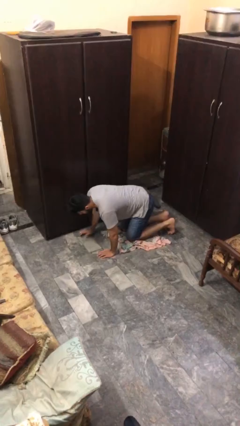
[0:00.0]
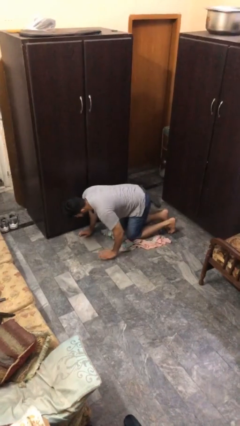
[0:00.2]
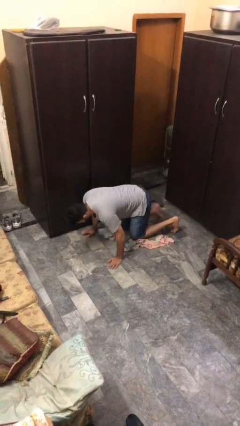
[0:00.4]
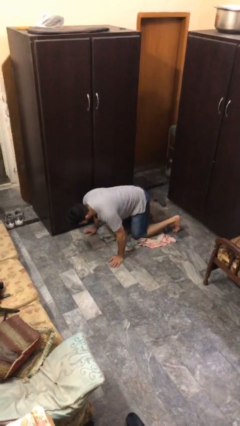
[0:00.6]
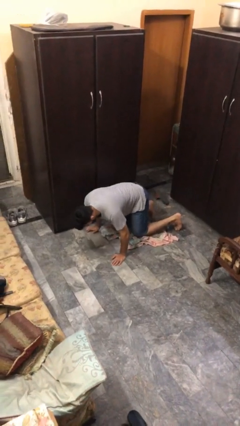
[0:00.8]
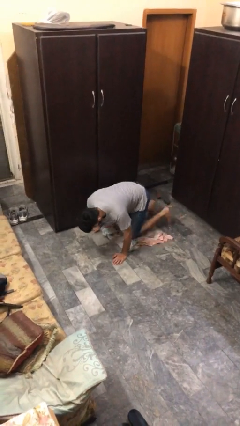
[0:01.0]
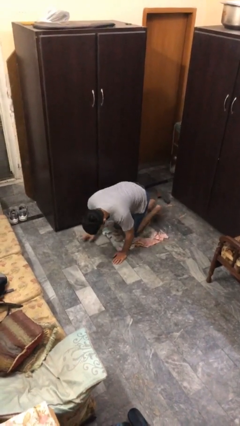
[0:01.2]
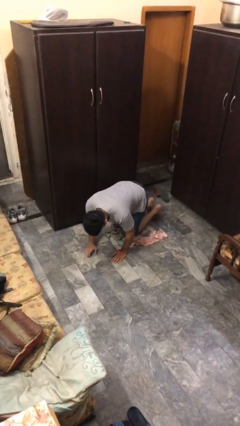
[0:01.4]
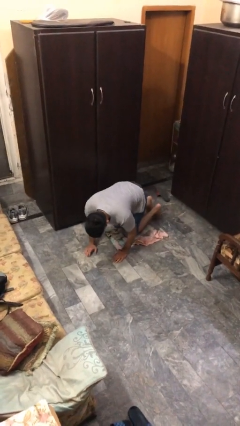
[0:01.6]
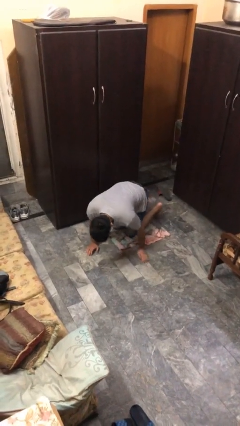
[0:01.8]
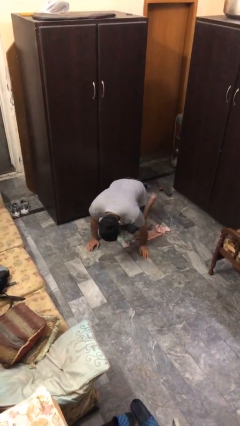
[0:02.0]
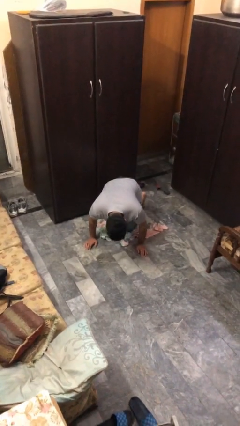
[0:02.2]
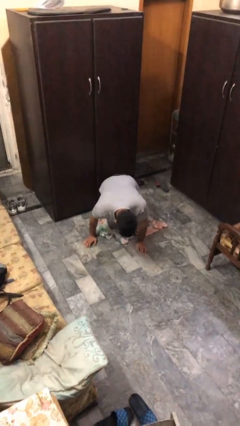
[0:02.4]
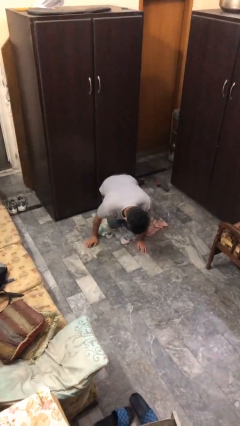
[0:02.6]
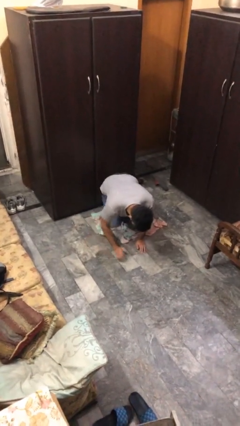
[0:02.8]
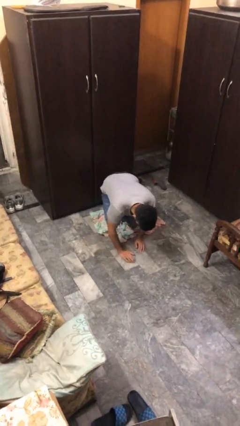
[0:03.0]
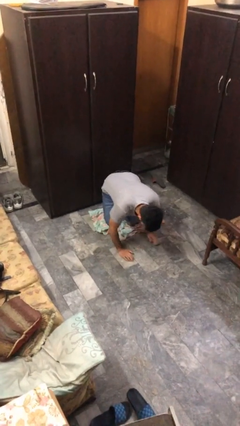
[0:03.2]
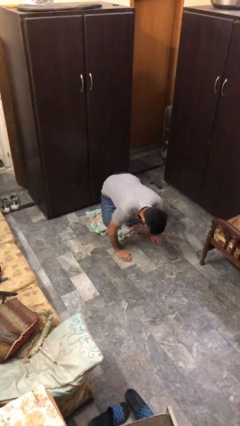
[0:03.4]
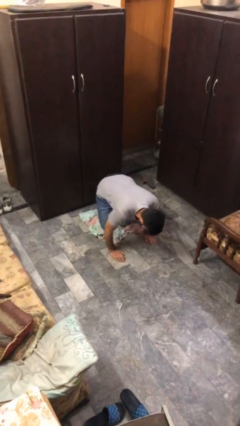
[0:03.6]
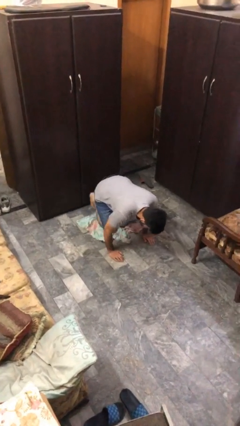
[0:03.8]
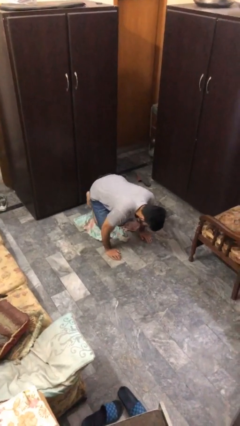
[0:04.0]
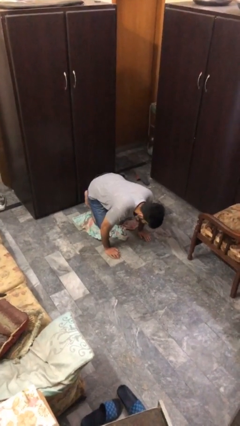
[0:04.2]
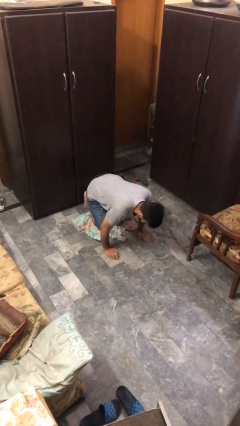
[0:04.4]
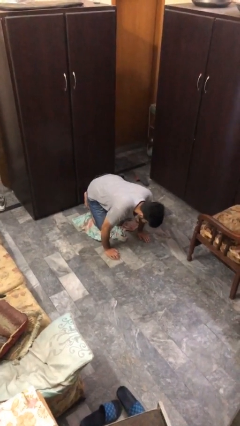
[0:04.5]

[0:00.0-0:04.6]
person crawls

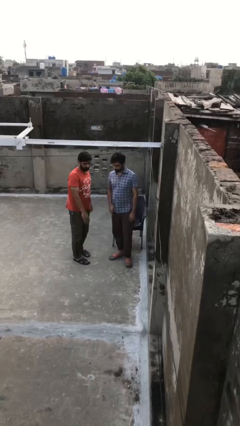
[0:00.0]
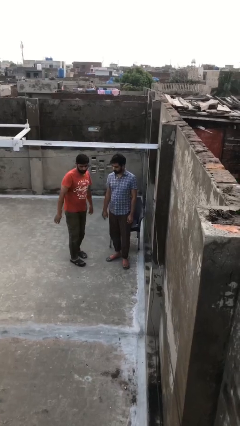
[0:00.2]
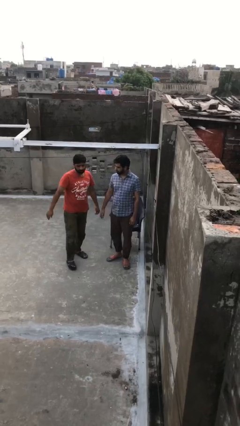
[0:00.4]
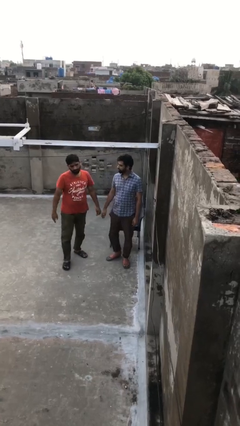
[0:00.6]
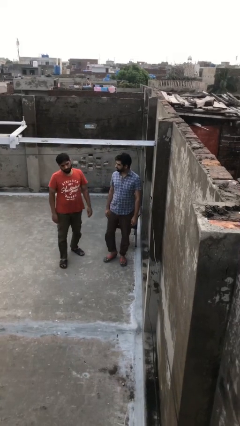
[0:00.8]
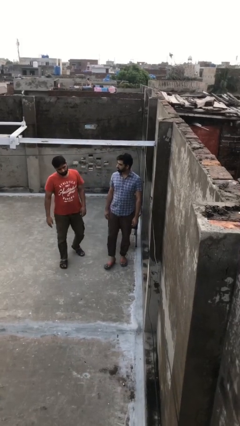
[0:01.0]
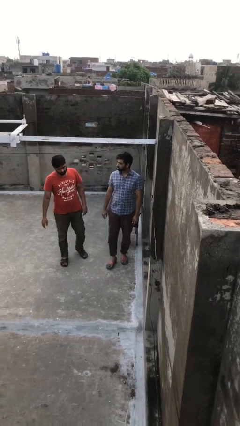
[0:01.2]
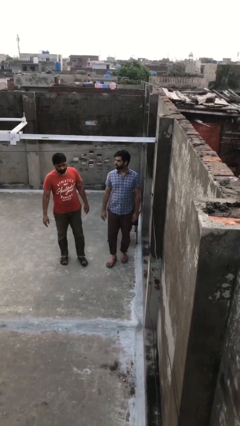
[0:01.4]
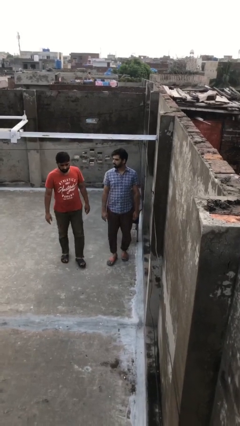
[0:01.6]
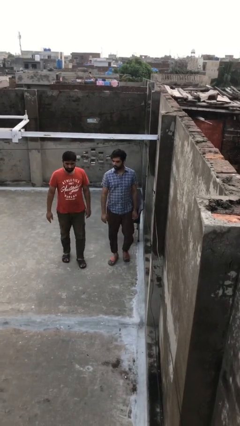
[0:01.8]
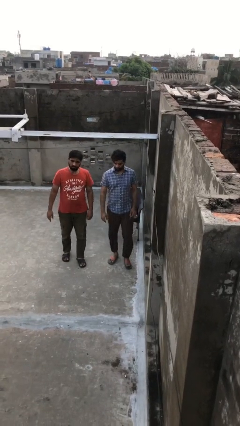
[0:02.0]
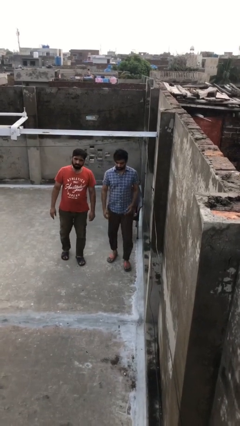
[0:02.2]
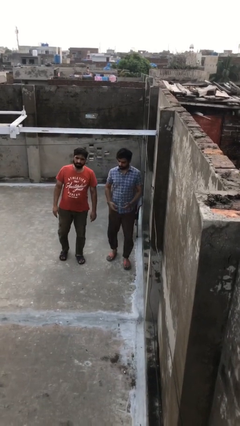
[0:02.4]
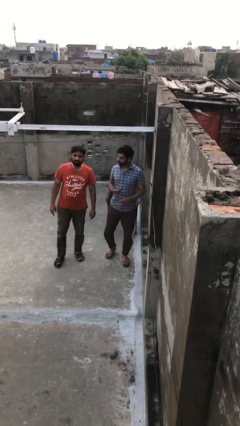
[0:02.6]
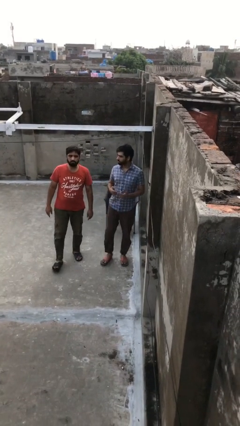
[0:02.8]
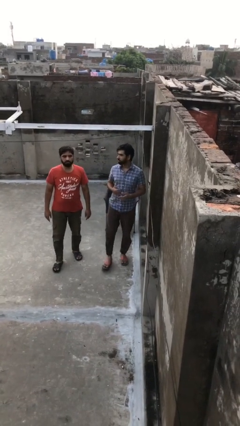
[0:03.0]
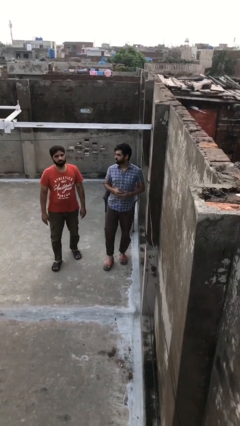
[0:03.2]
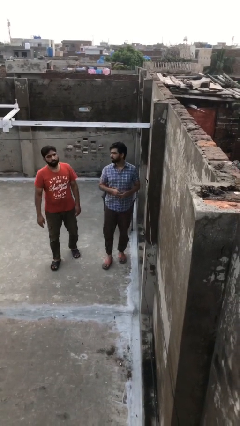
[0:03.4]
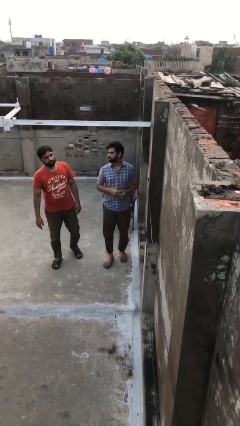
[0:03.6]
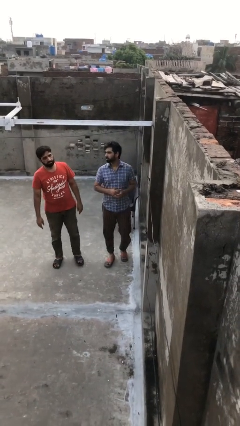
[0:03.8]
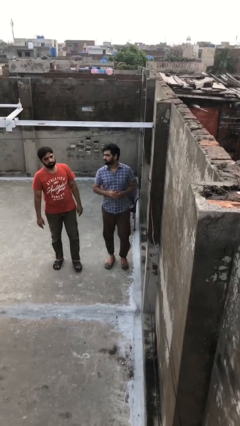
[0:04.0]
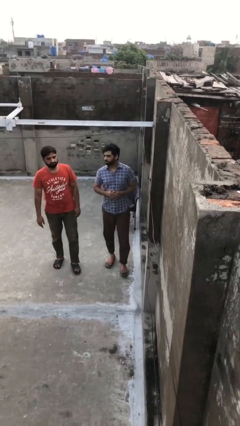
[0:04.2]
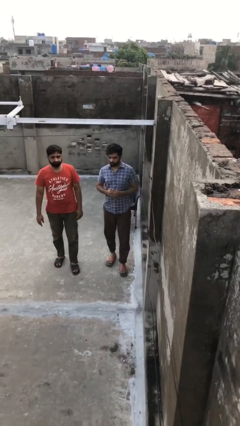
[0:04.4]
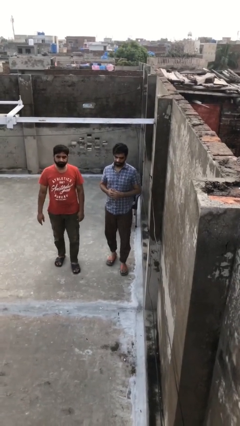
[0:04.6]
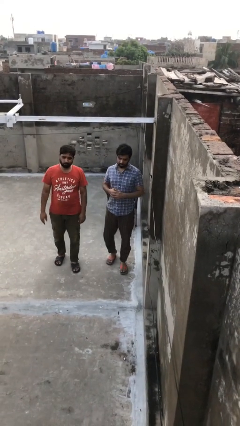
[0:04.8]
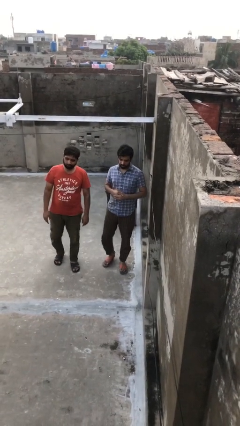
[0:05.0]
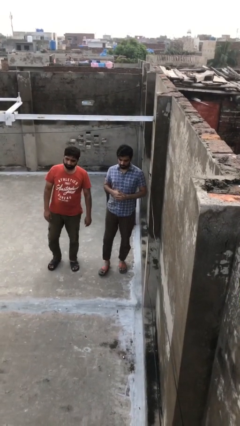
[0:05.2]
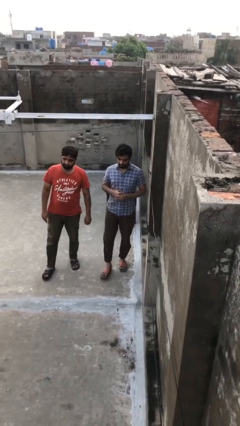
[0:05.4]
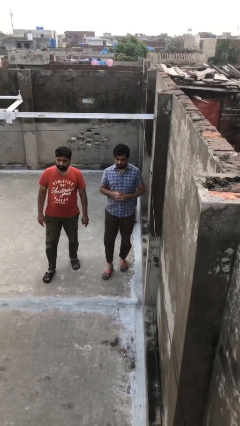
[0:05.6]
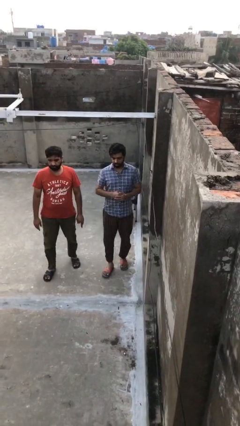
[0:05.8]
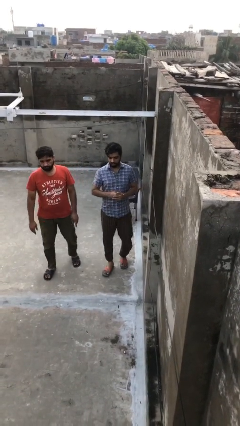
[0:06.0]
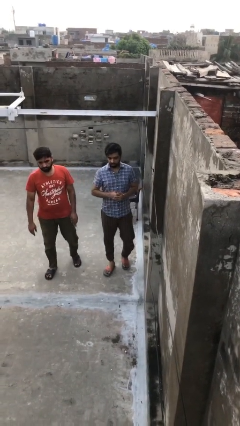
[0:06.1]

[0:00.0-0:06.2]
person talks to person

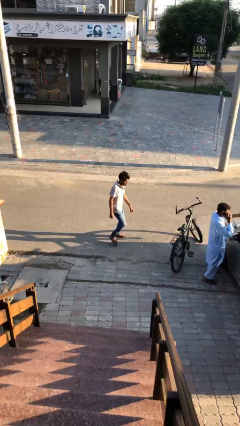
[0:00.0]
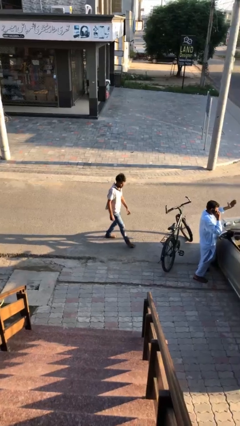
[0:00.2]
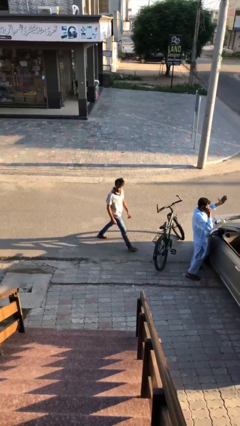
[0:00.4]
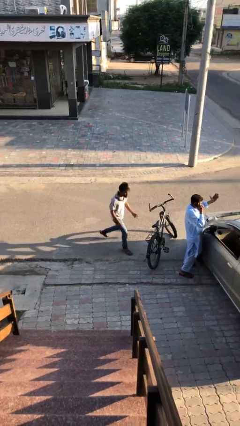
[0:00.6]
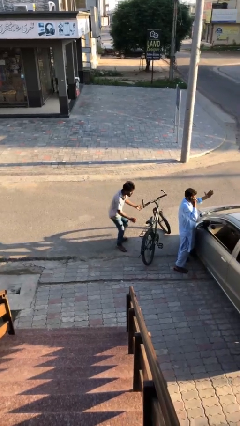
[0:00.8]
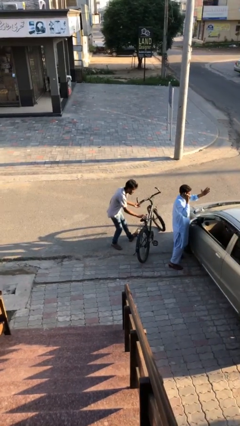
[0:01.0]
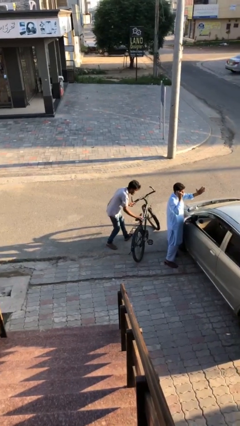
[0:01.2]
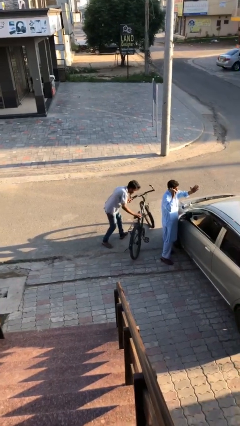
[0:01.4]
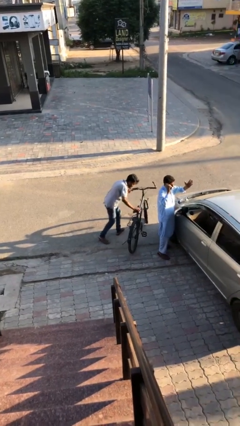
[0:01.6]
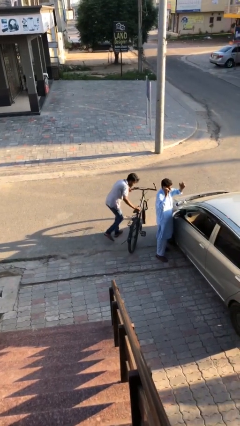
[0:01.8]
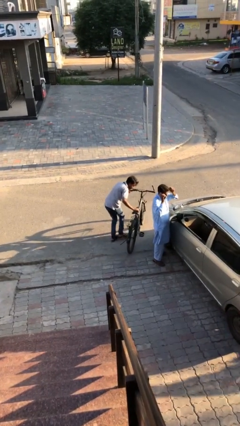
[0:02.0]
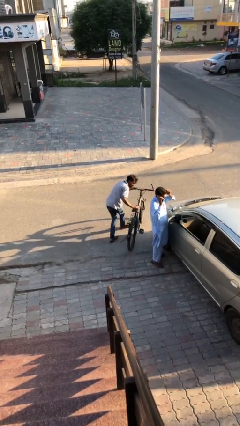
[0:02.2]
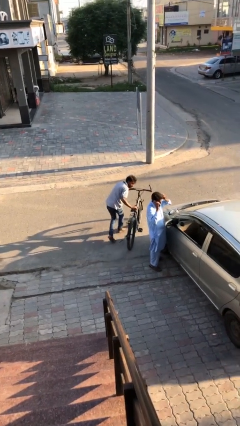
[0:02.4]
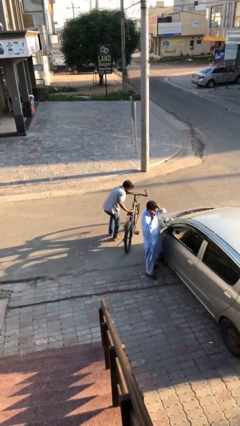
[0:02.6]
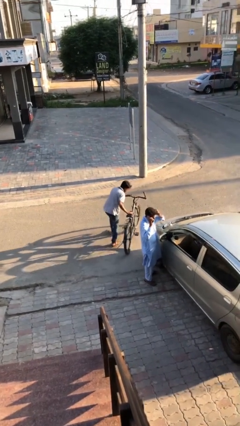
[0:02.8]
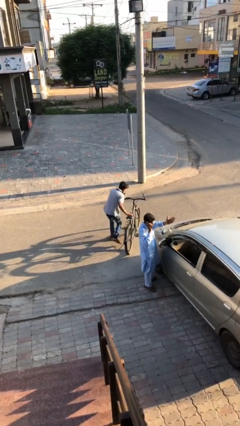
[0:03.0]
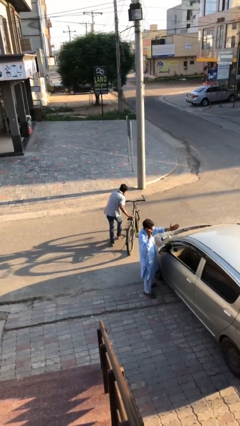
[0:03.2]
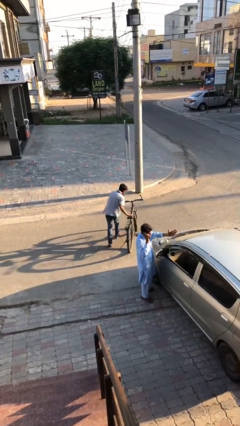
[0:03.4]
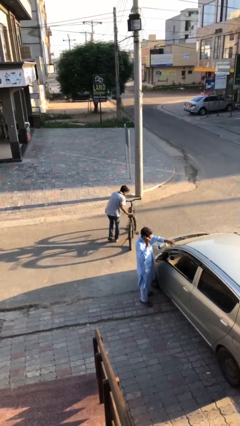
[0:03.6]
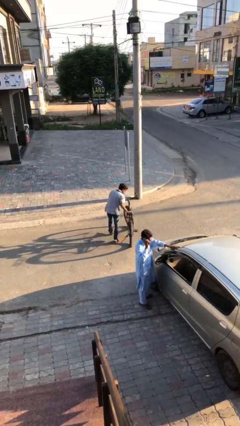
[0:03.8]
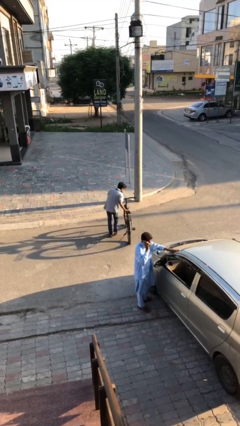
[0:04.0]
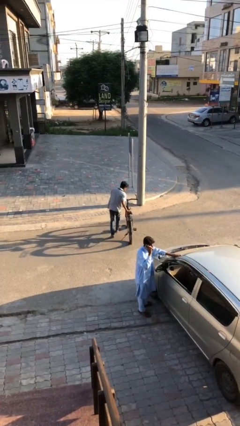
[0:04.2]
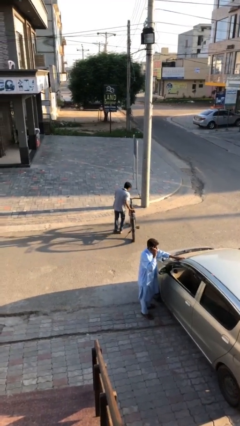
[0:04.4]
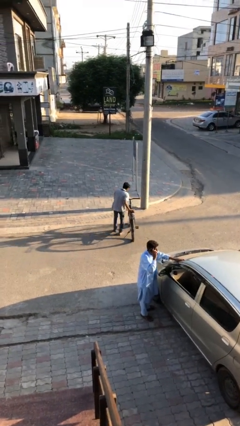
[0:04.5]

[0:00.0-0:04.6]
person steals object from person

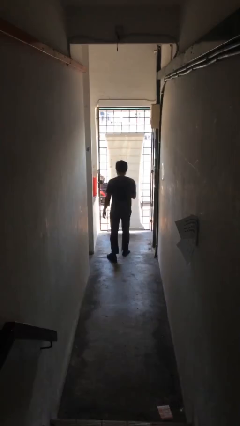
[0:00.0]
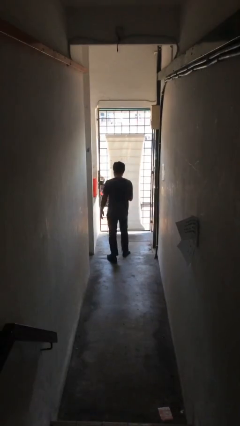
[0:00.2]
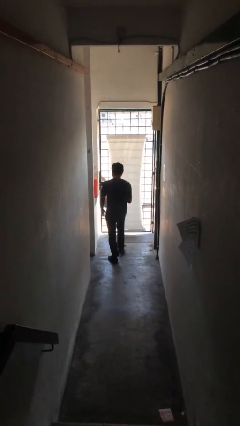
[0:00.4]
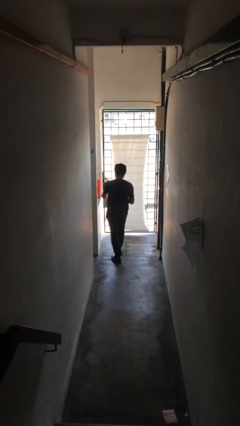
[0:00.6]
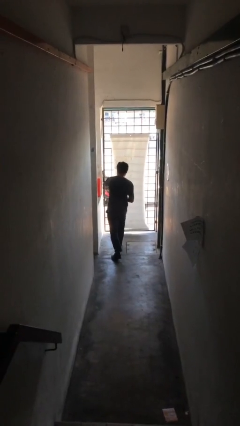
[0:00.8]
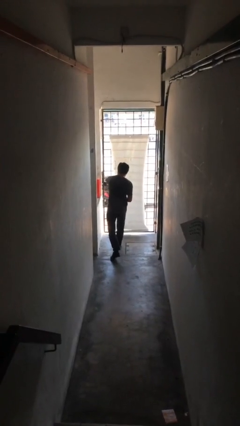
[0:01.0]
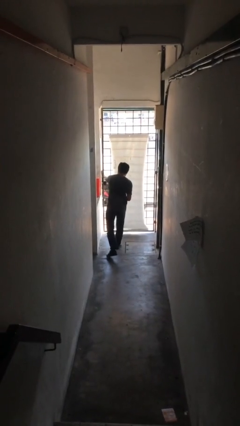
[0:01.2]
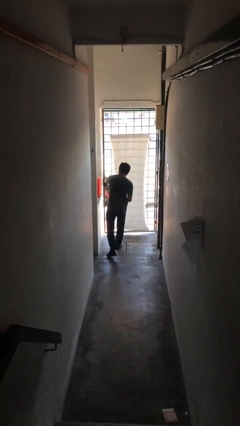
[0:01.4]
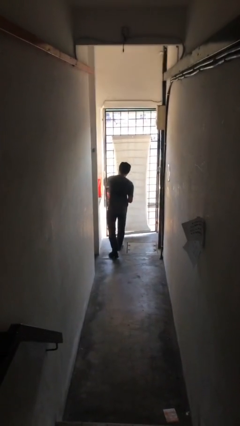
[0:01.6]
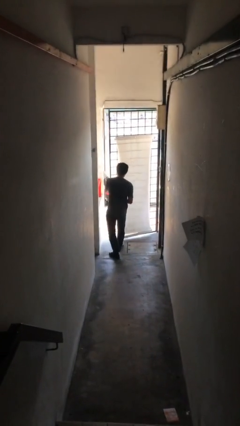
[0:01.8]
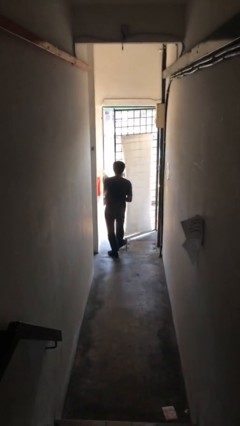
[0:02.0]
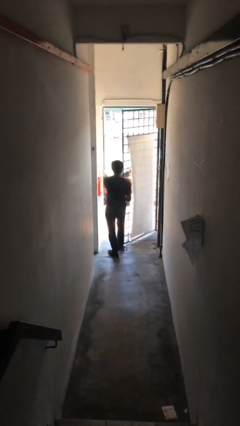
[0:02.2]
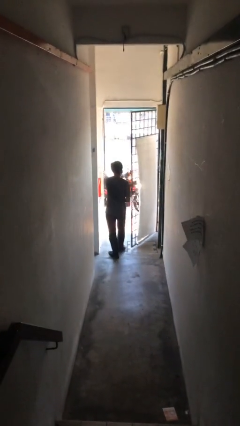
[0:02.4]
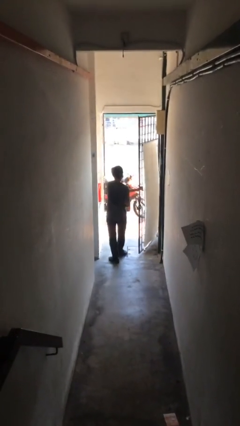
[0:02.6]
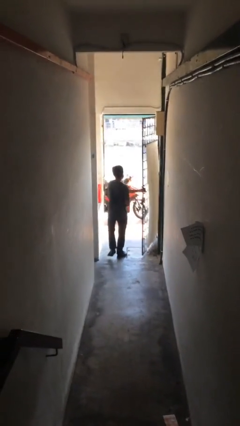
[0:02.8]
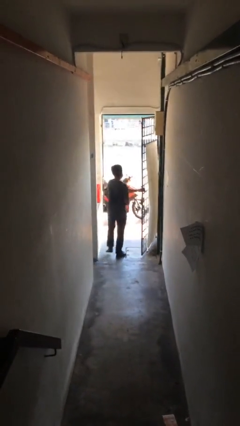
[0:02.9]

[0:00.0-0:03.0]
person opens facility door
